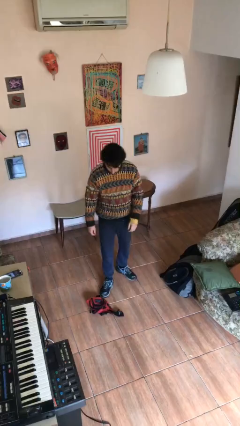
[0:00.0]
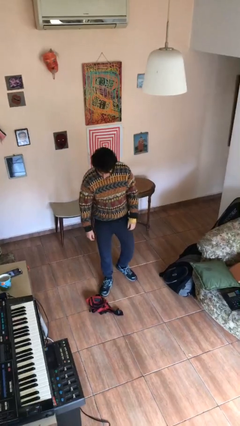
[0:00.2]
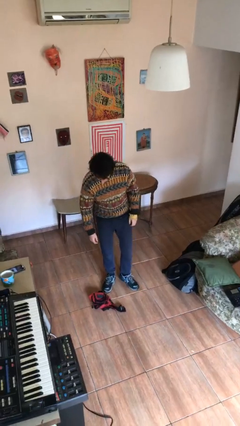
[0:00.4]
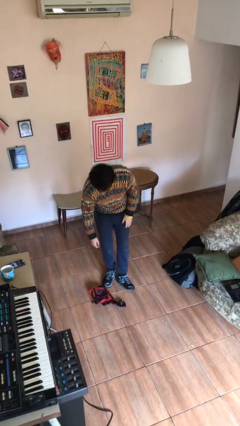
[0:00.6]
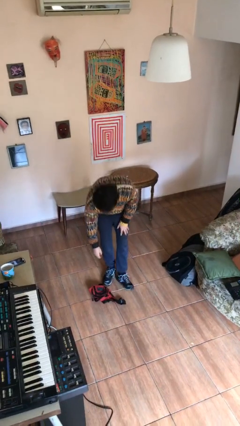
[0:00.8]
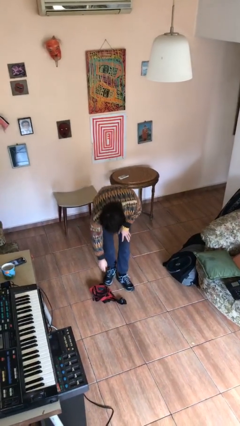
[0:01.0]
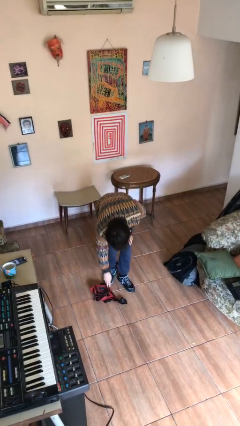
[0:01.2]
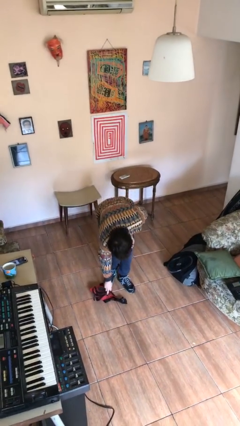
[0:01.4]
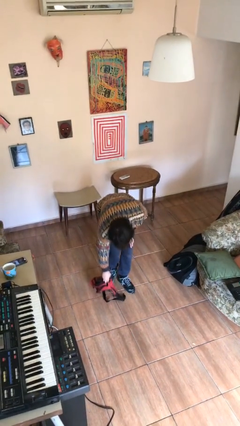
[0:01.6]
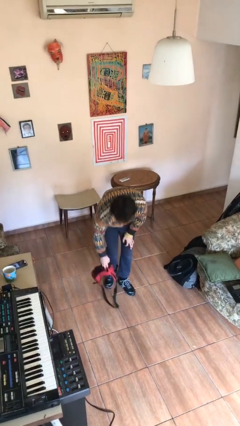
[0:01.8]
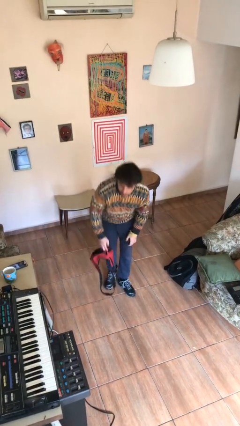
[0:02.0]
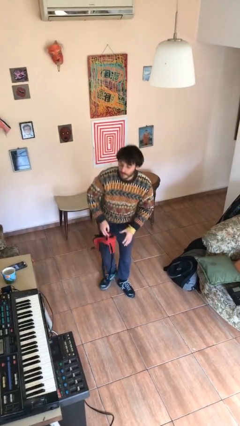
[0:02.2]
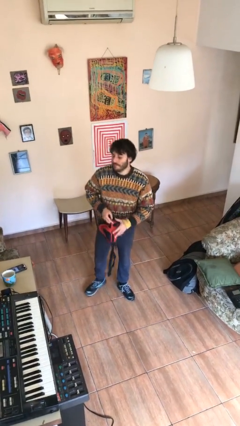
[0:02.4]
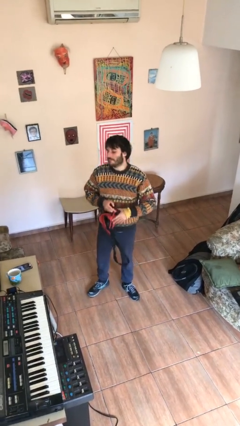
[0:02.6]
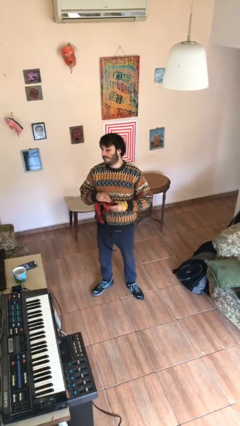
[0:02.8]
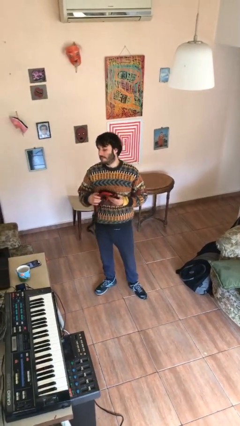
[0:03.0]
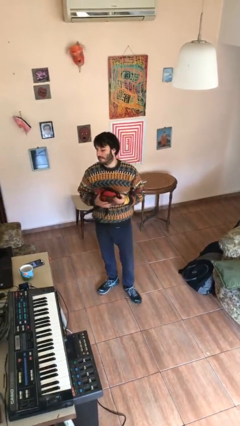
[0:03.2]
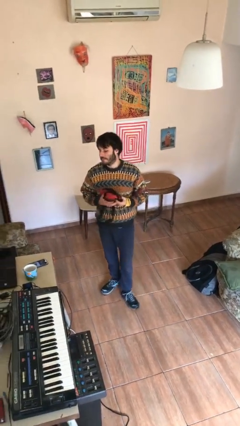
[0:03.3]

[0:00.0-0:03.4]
person picks up object from floor

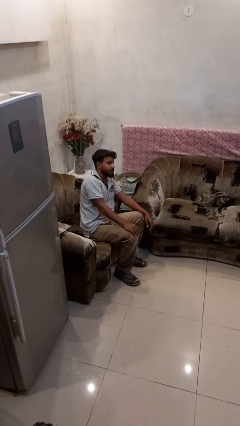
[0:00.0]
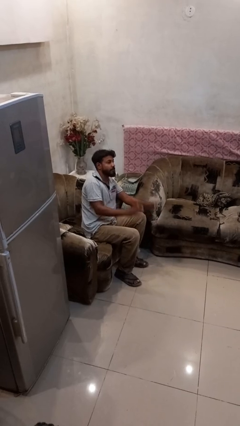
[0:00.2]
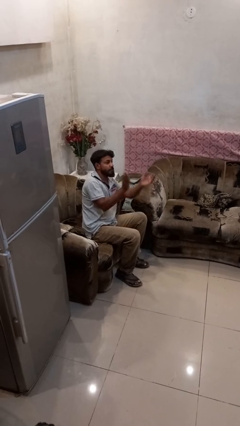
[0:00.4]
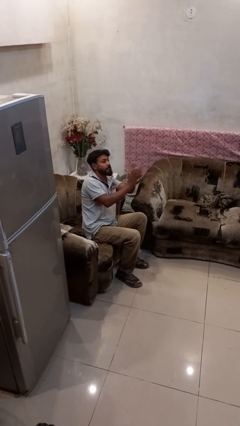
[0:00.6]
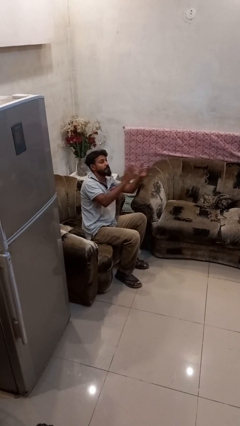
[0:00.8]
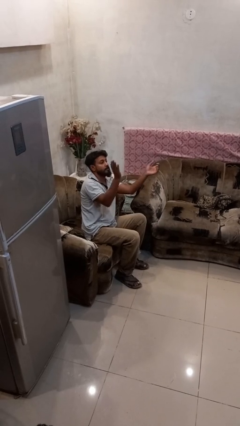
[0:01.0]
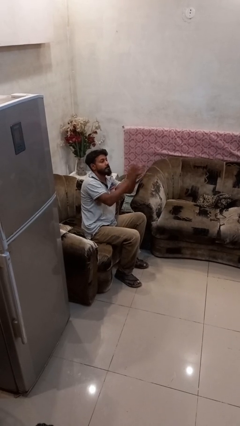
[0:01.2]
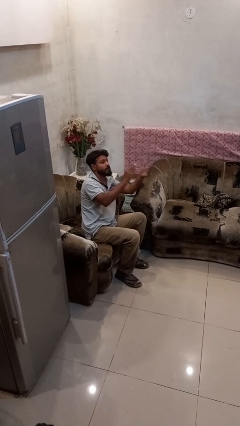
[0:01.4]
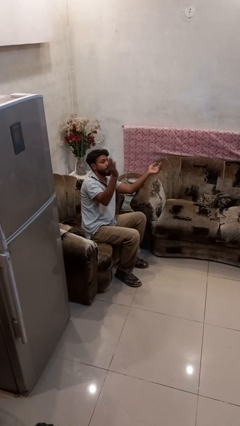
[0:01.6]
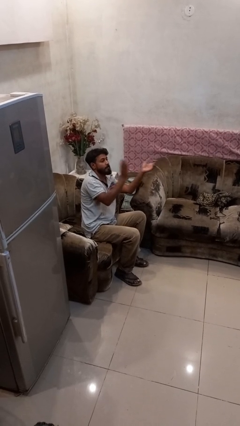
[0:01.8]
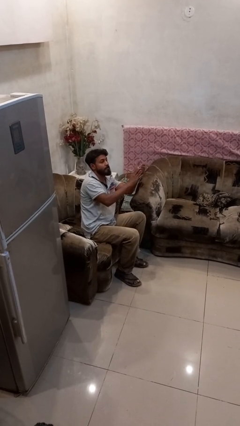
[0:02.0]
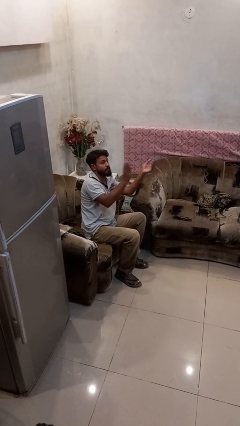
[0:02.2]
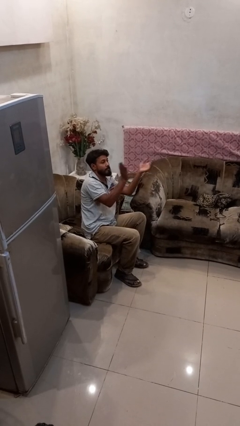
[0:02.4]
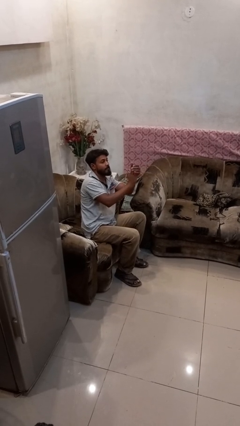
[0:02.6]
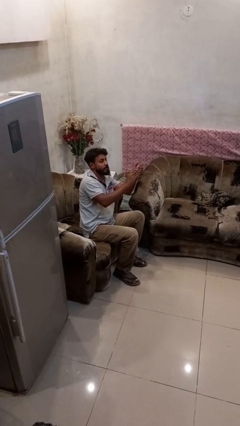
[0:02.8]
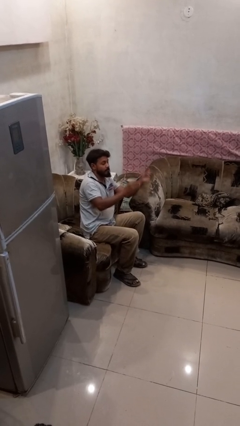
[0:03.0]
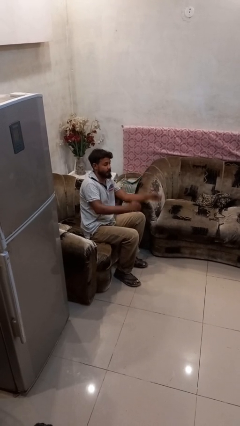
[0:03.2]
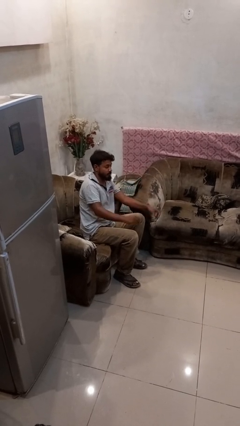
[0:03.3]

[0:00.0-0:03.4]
person claps hands

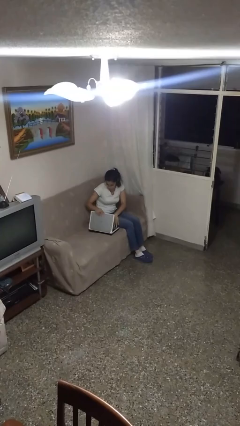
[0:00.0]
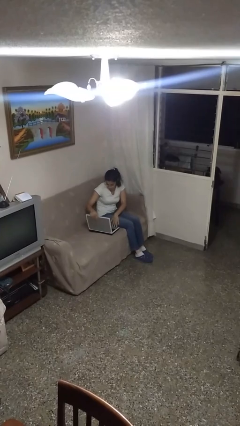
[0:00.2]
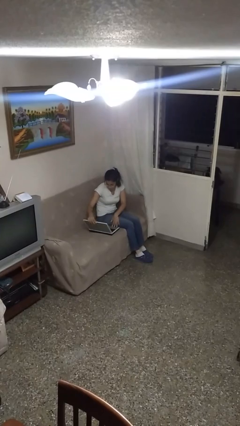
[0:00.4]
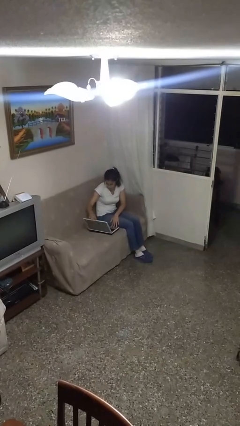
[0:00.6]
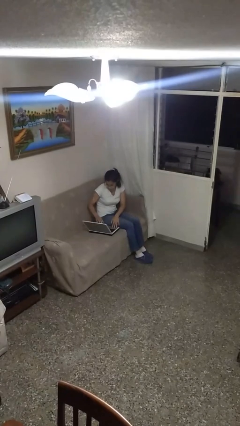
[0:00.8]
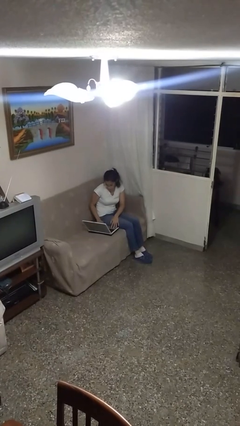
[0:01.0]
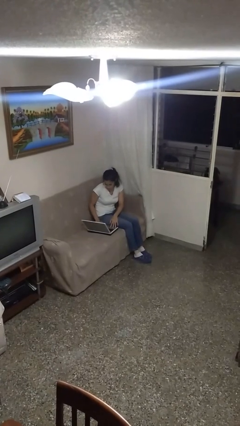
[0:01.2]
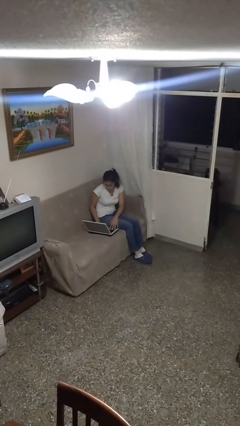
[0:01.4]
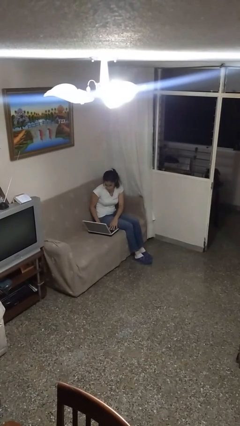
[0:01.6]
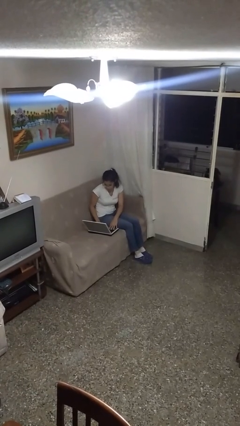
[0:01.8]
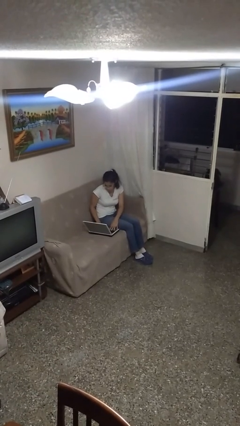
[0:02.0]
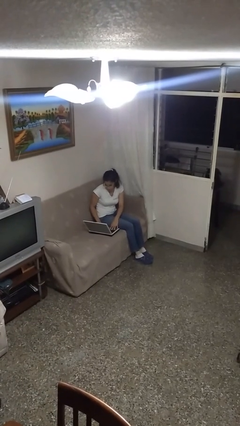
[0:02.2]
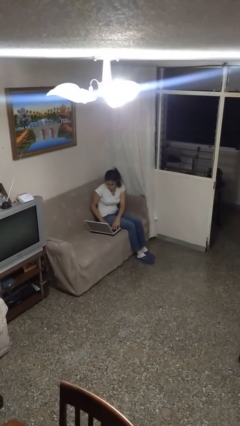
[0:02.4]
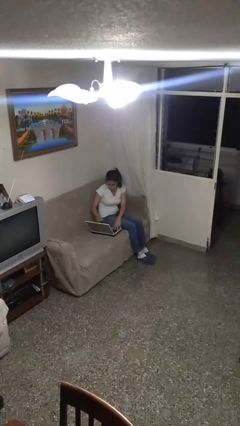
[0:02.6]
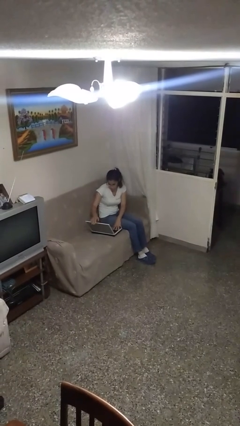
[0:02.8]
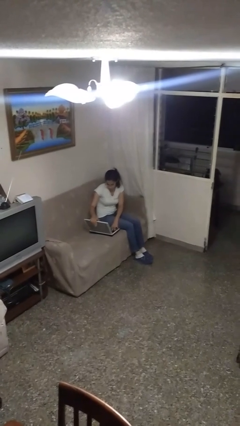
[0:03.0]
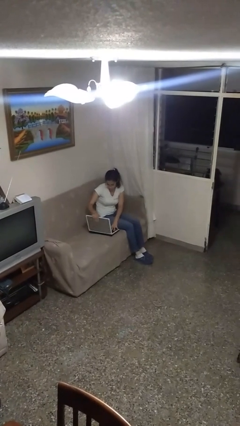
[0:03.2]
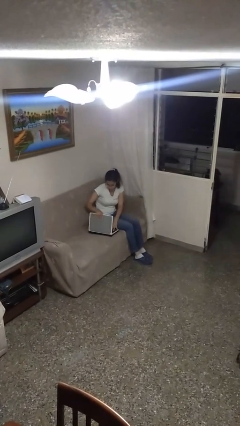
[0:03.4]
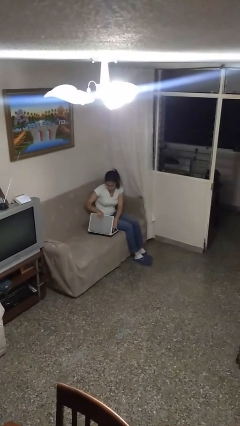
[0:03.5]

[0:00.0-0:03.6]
person opens laptop

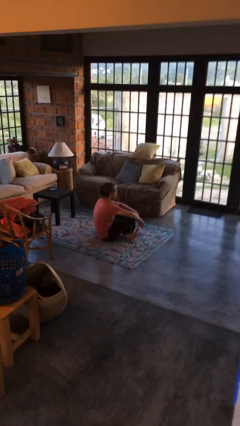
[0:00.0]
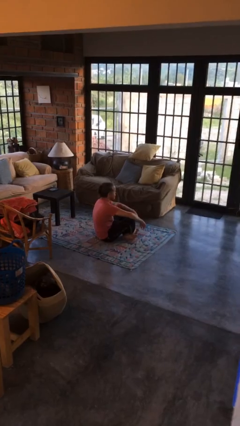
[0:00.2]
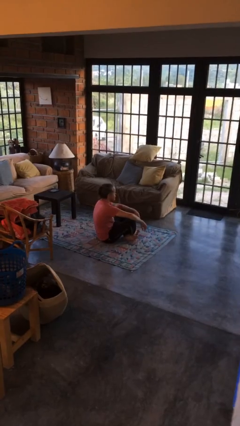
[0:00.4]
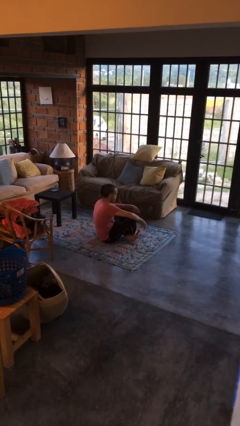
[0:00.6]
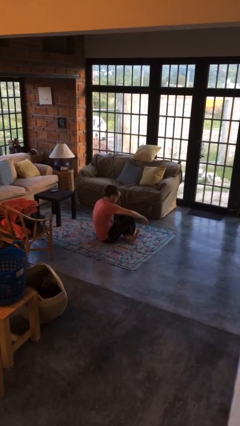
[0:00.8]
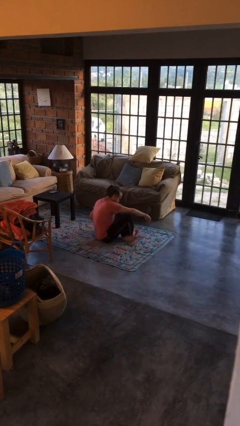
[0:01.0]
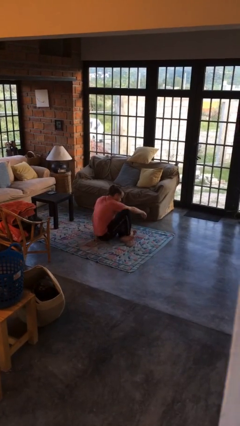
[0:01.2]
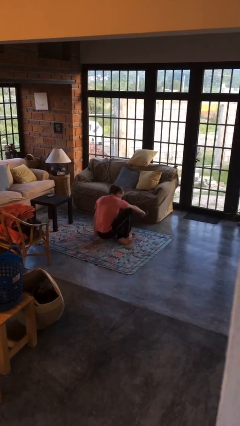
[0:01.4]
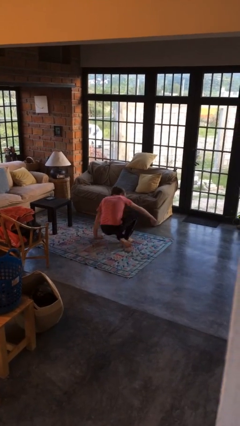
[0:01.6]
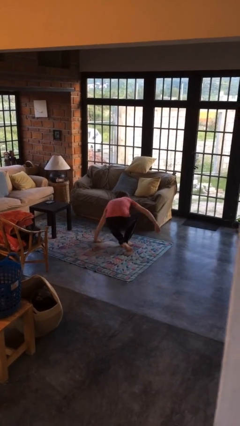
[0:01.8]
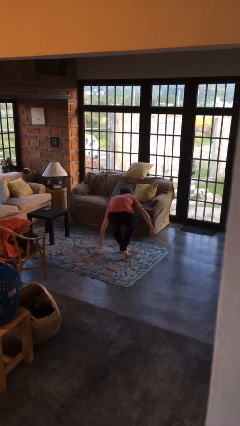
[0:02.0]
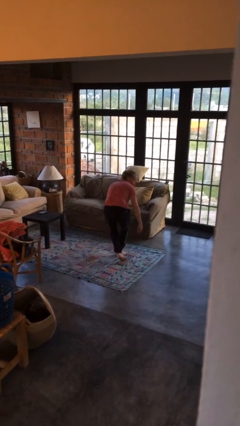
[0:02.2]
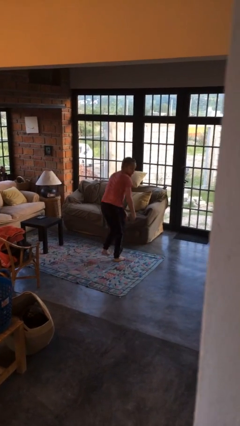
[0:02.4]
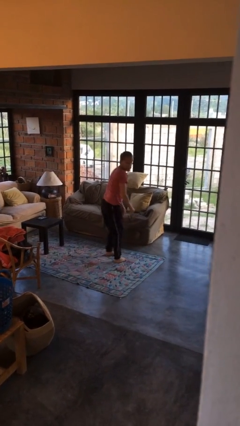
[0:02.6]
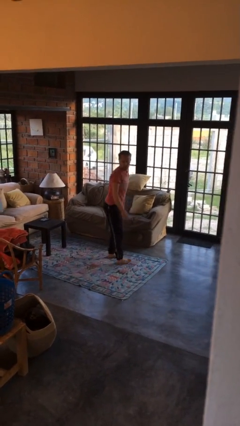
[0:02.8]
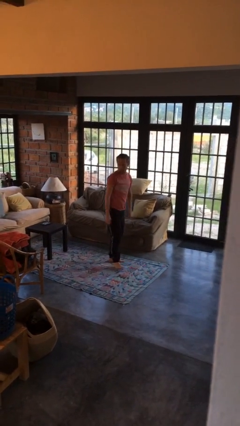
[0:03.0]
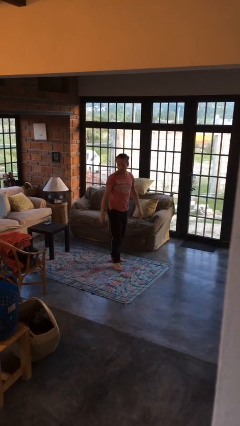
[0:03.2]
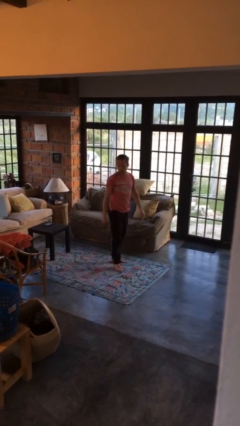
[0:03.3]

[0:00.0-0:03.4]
person stands up from floor

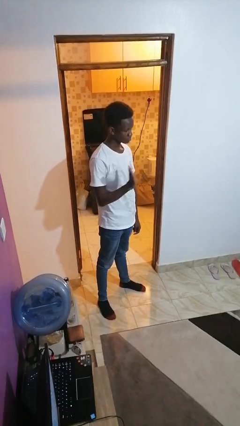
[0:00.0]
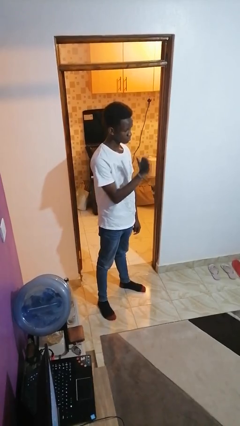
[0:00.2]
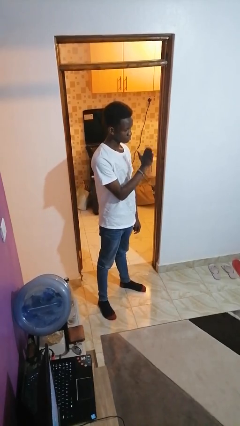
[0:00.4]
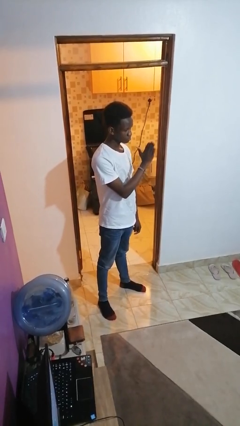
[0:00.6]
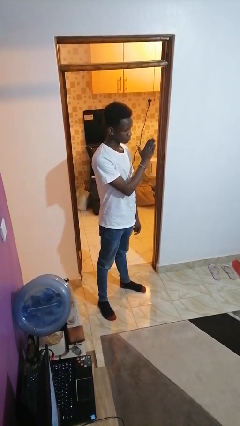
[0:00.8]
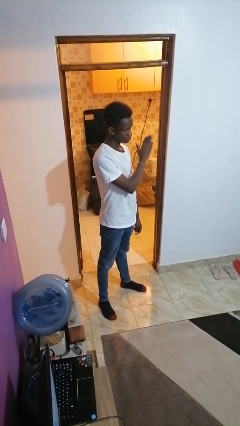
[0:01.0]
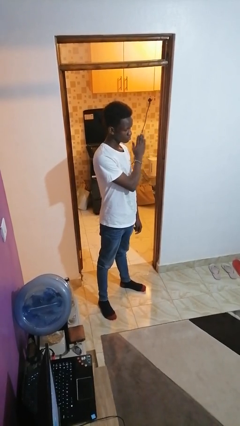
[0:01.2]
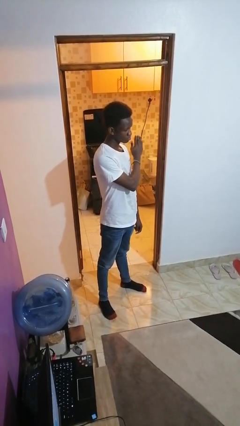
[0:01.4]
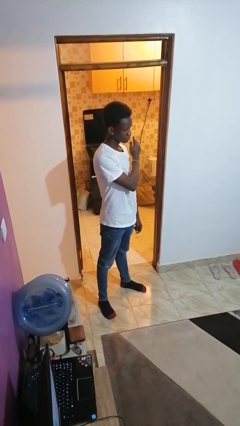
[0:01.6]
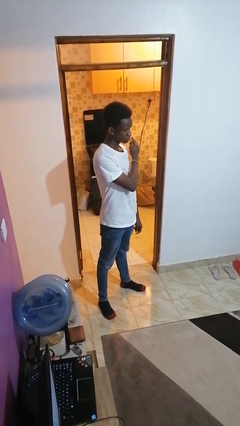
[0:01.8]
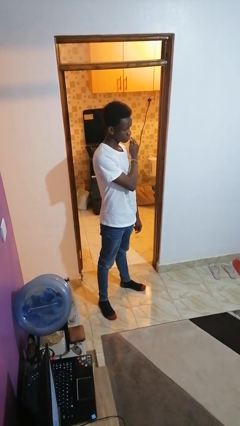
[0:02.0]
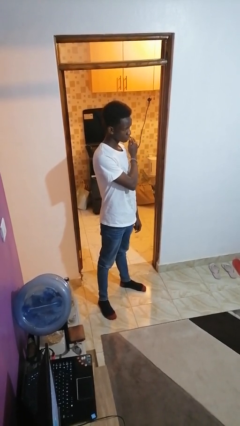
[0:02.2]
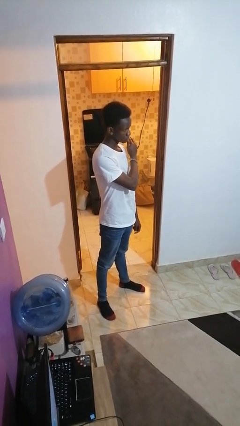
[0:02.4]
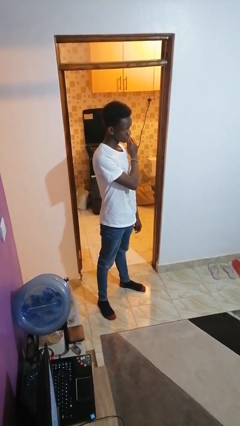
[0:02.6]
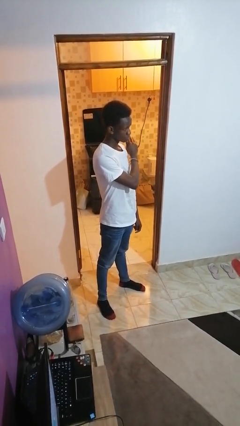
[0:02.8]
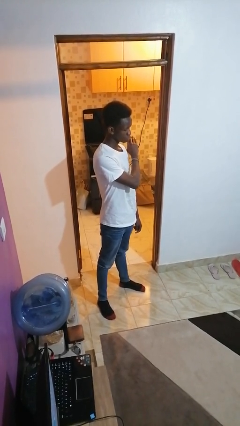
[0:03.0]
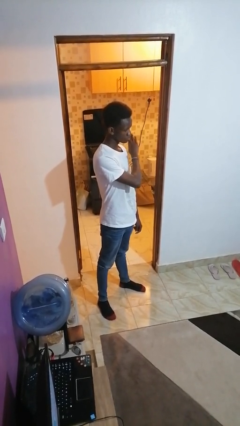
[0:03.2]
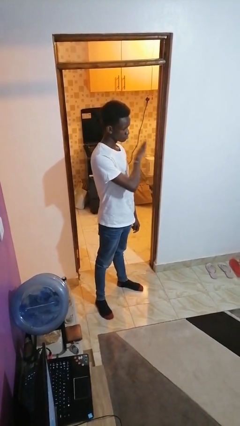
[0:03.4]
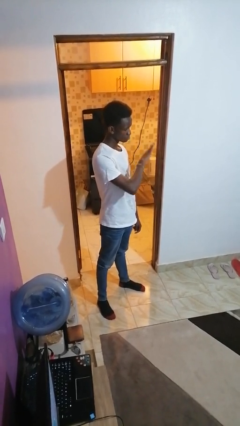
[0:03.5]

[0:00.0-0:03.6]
person gestures swipe left

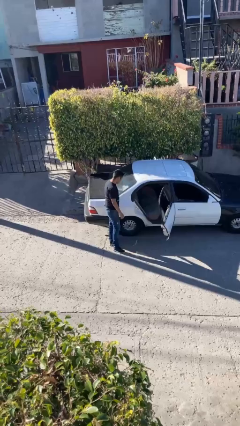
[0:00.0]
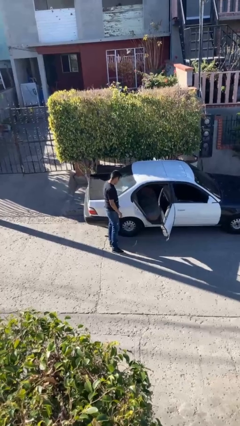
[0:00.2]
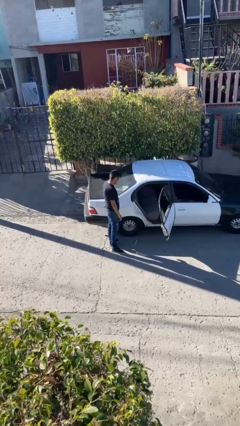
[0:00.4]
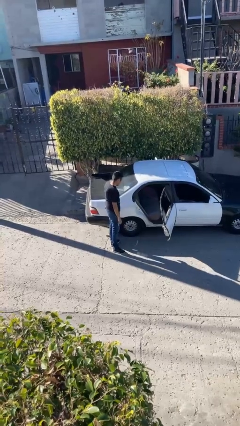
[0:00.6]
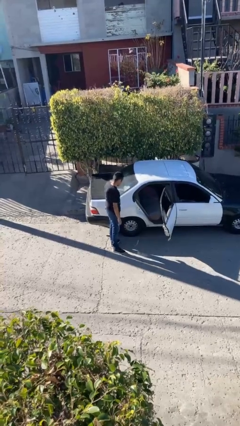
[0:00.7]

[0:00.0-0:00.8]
person exits car
